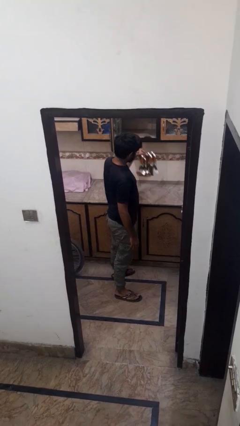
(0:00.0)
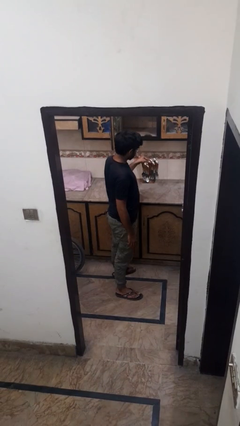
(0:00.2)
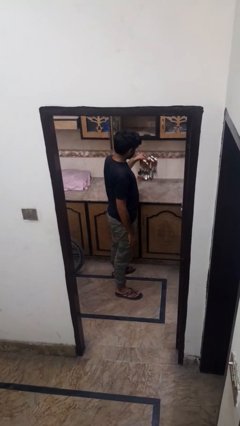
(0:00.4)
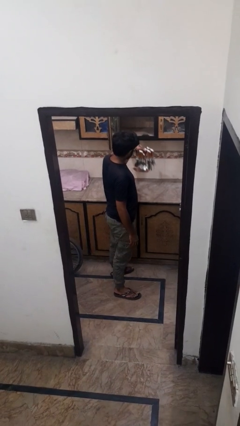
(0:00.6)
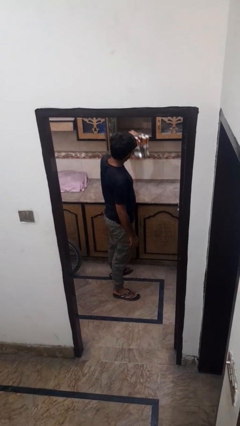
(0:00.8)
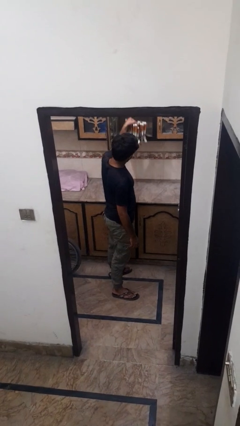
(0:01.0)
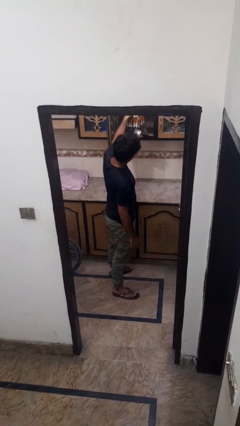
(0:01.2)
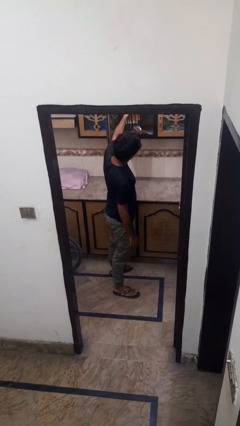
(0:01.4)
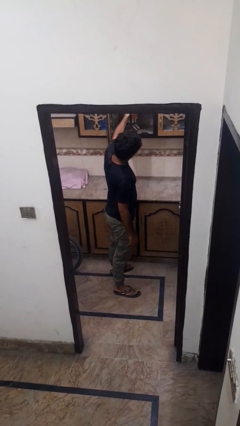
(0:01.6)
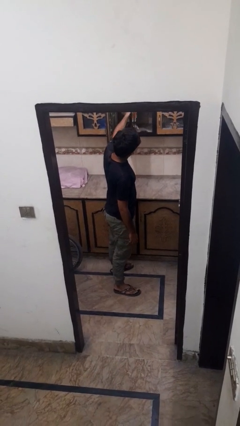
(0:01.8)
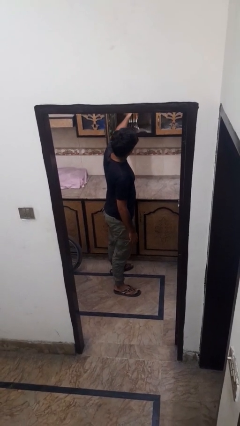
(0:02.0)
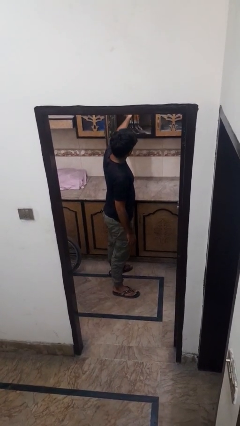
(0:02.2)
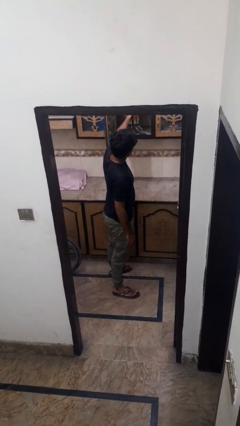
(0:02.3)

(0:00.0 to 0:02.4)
person puts down object into cabinet

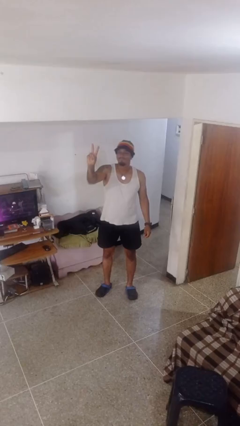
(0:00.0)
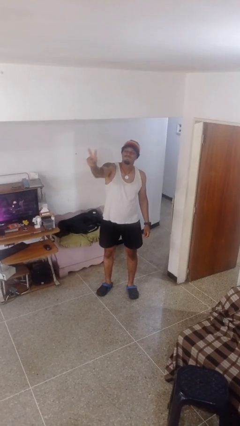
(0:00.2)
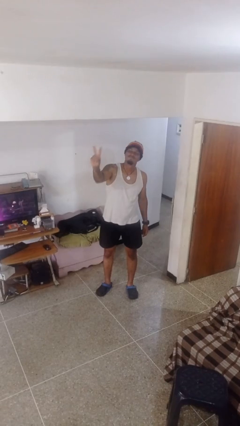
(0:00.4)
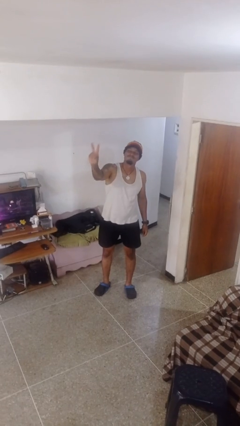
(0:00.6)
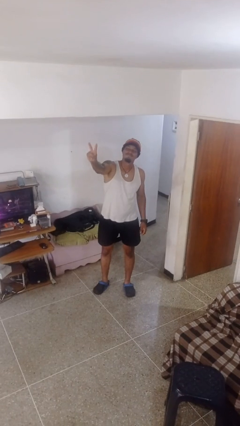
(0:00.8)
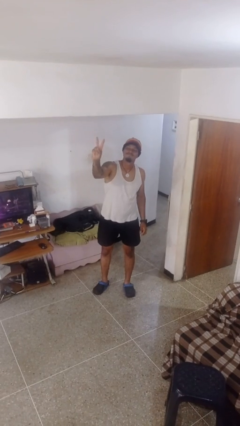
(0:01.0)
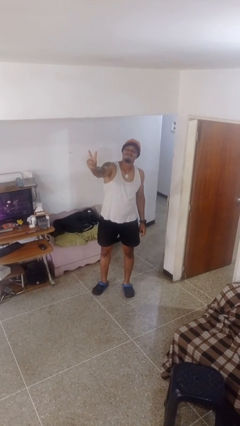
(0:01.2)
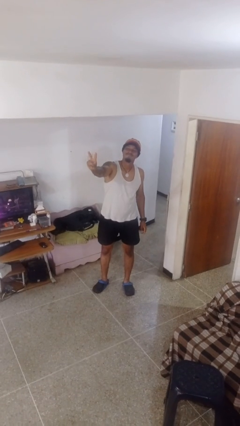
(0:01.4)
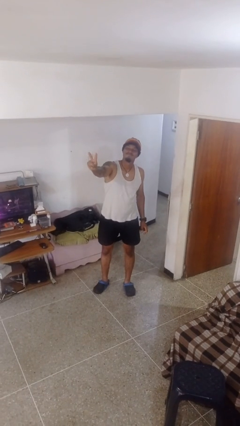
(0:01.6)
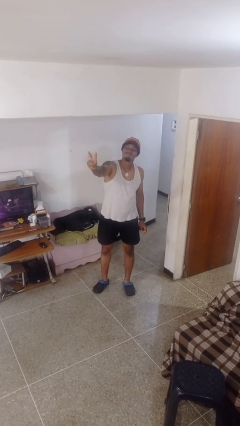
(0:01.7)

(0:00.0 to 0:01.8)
person gestures peace

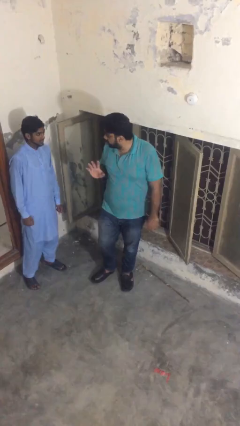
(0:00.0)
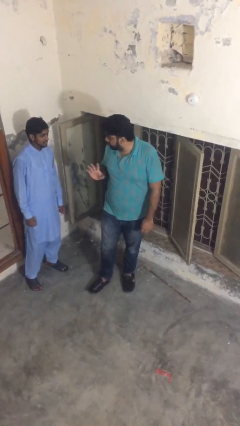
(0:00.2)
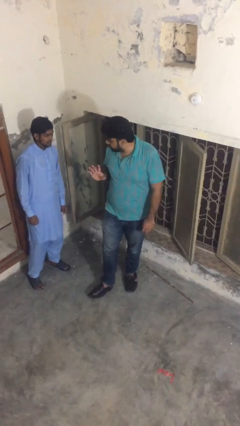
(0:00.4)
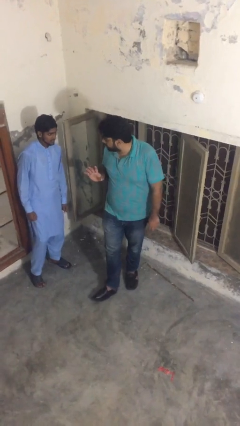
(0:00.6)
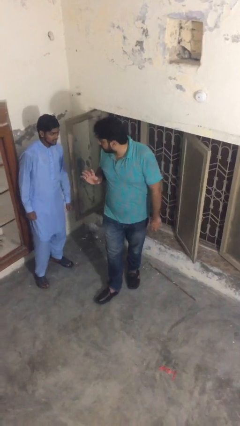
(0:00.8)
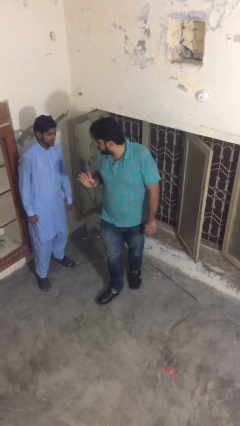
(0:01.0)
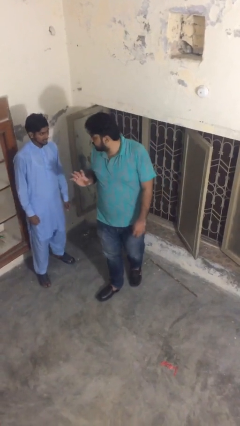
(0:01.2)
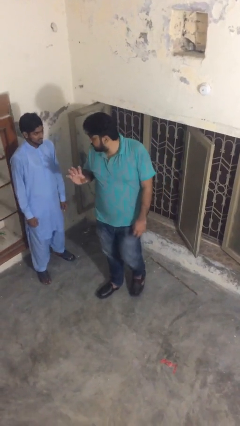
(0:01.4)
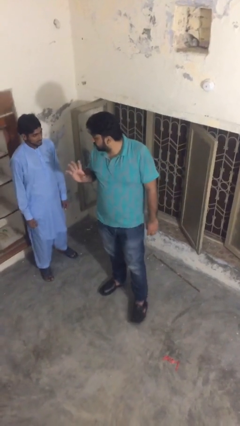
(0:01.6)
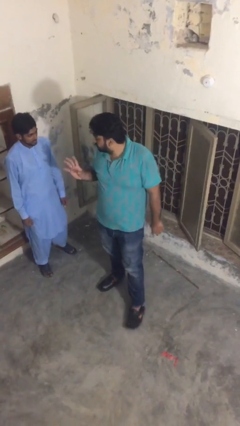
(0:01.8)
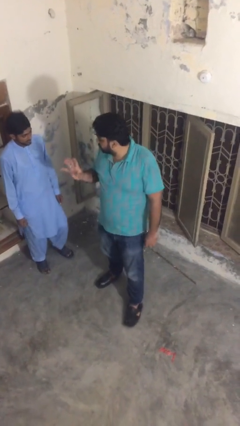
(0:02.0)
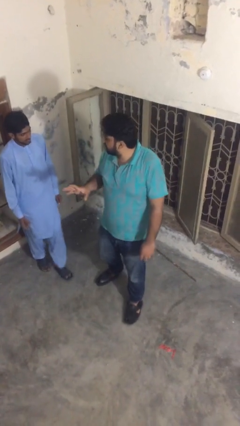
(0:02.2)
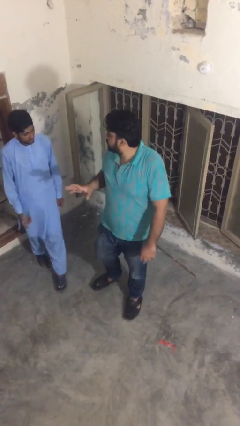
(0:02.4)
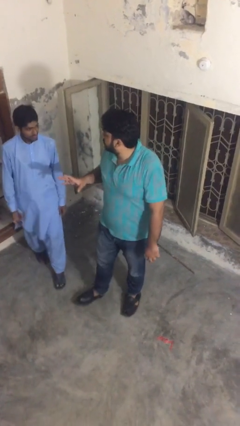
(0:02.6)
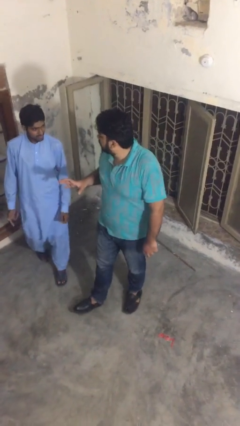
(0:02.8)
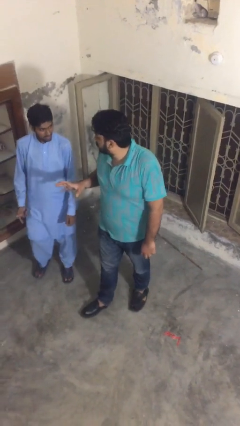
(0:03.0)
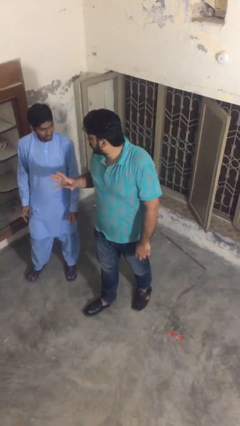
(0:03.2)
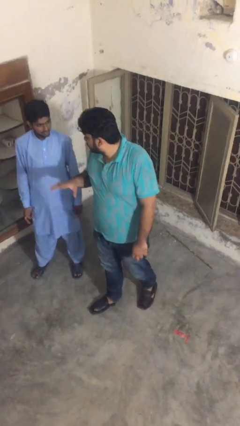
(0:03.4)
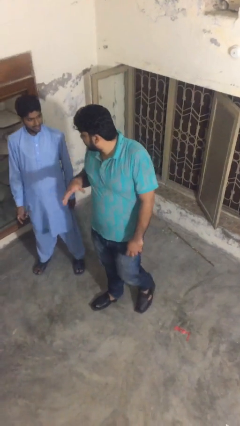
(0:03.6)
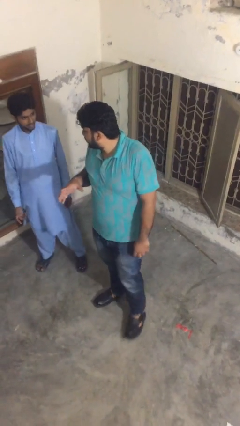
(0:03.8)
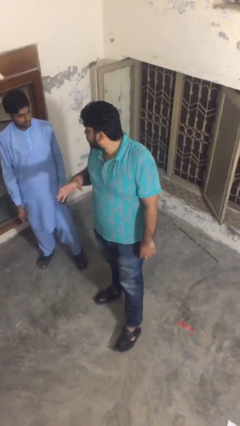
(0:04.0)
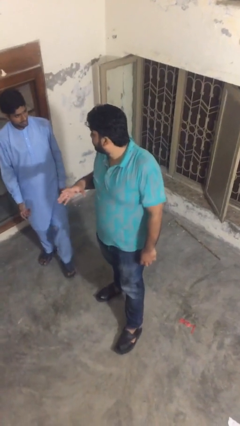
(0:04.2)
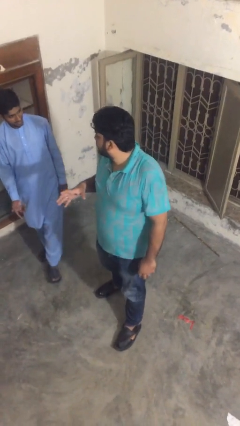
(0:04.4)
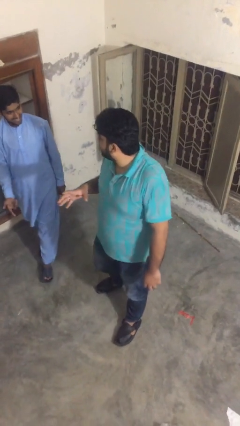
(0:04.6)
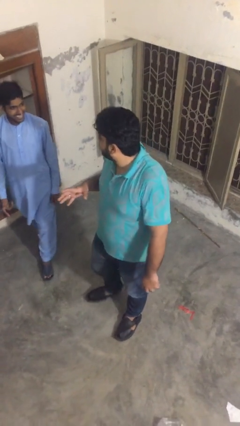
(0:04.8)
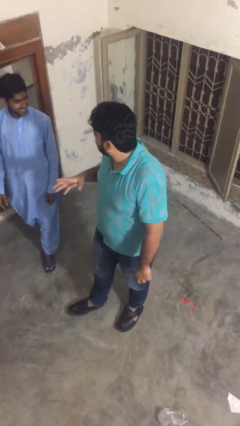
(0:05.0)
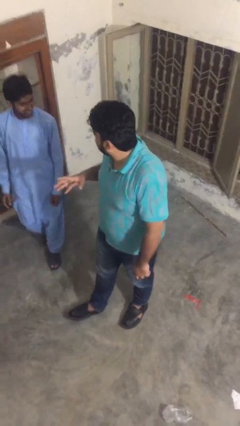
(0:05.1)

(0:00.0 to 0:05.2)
person talks to person

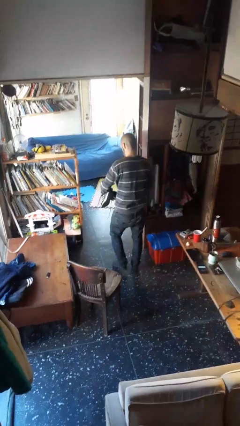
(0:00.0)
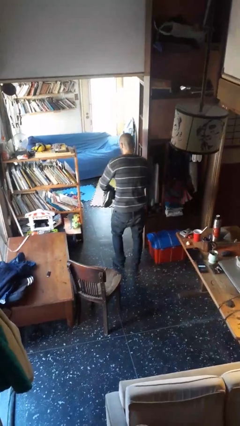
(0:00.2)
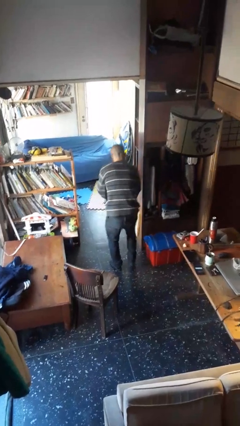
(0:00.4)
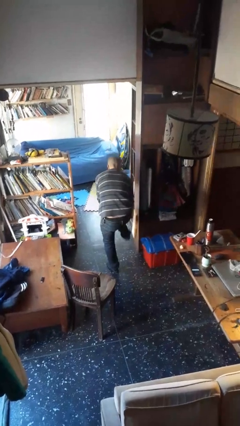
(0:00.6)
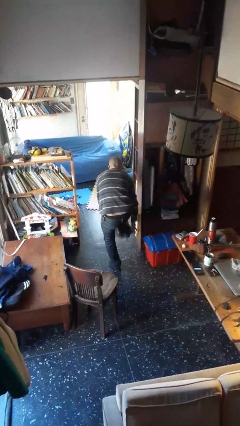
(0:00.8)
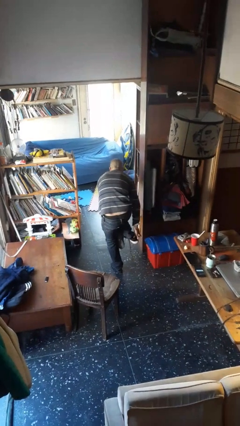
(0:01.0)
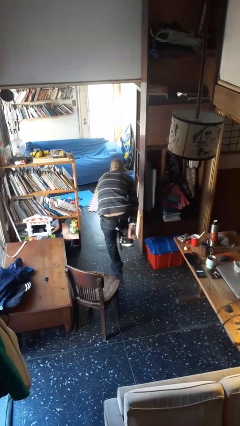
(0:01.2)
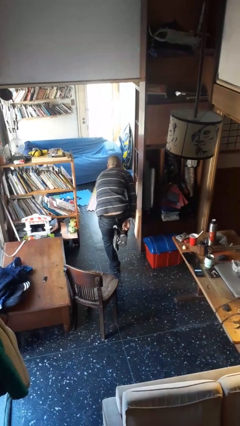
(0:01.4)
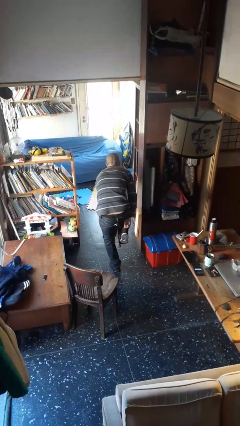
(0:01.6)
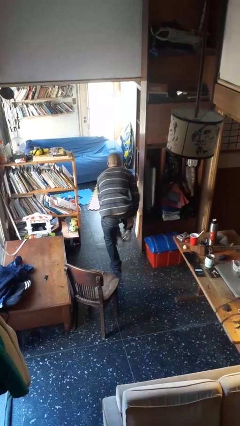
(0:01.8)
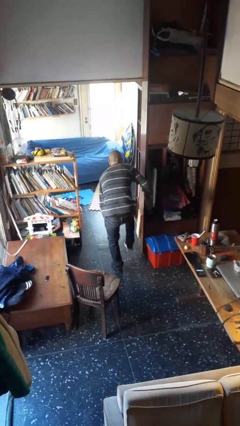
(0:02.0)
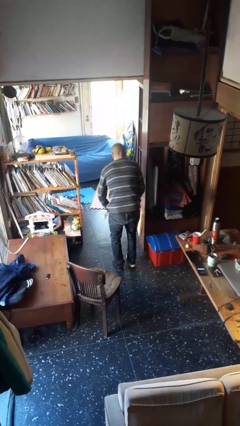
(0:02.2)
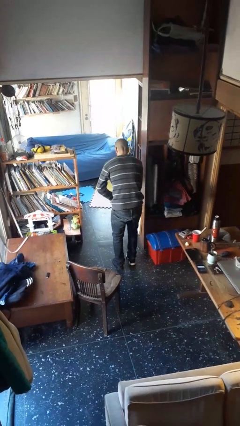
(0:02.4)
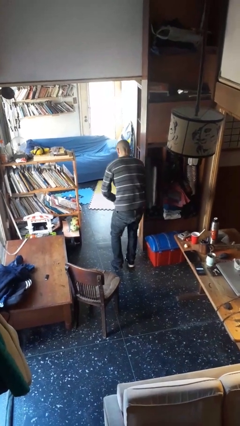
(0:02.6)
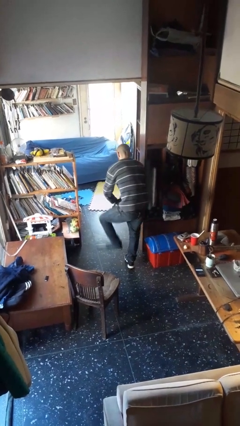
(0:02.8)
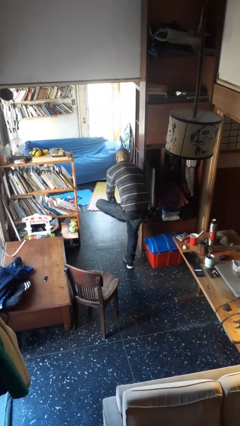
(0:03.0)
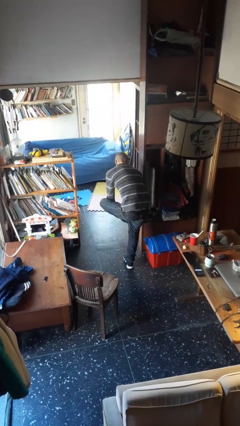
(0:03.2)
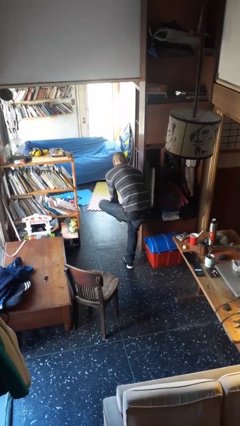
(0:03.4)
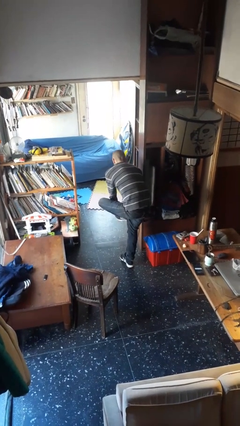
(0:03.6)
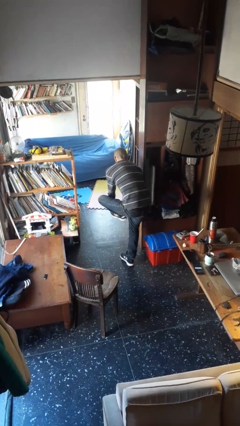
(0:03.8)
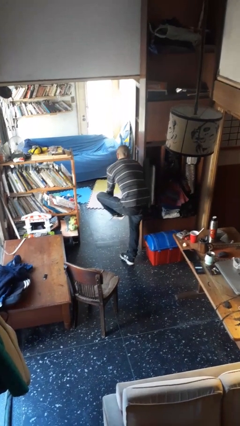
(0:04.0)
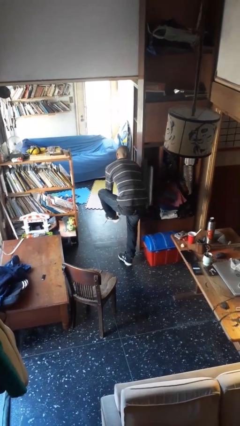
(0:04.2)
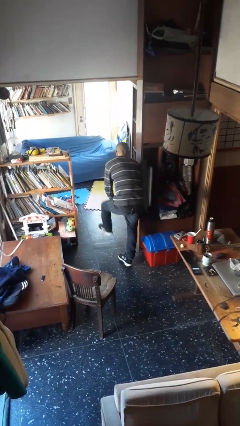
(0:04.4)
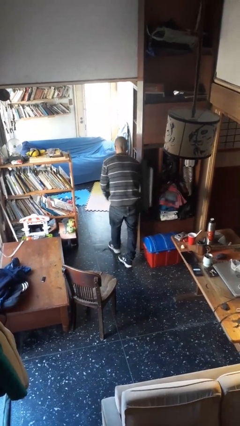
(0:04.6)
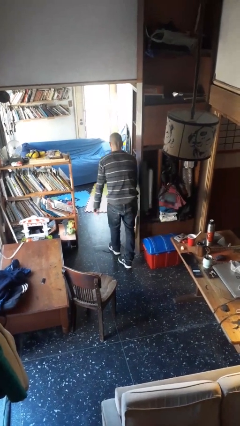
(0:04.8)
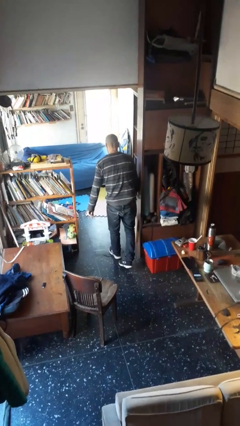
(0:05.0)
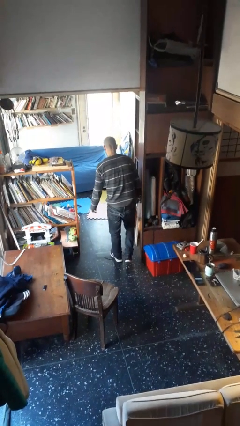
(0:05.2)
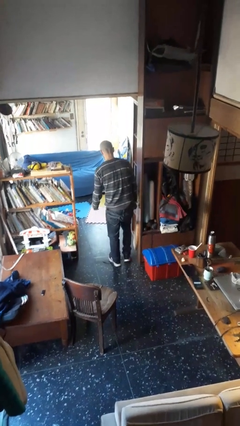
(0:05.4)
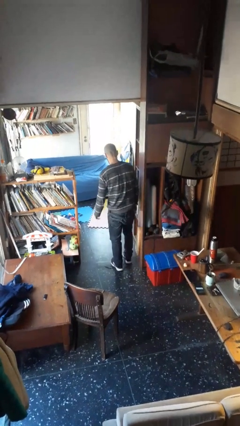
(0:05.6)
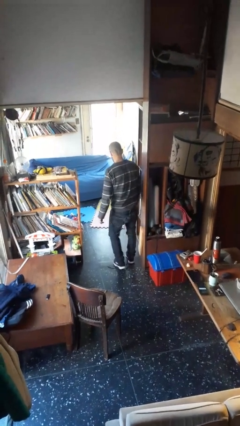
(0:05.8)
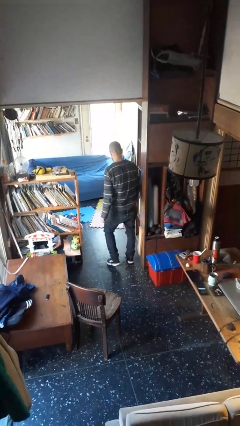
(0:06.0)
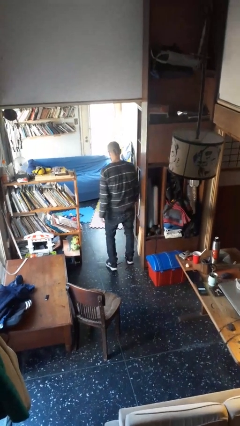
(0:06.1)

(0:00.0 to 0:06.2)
person puts on shoes

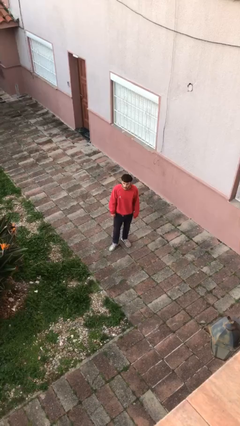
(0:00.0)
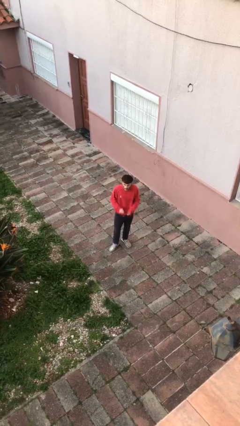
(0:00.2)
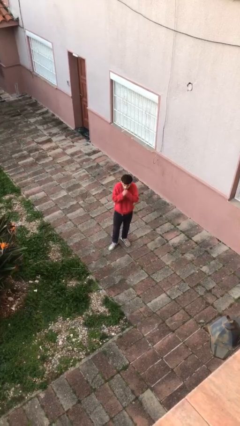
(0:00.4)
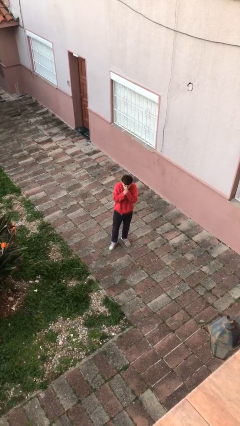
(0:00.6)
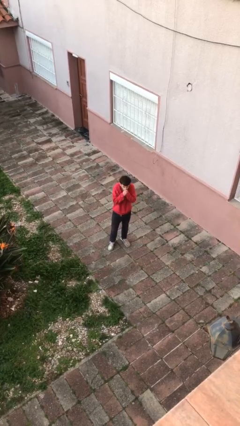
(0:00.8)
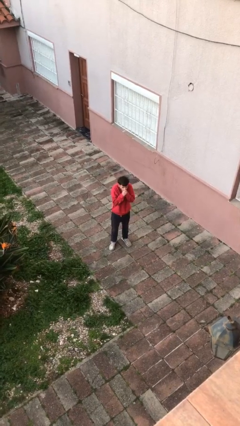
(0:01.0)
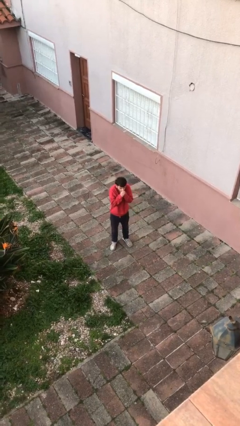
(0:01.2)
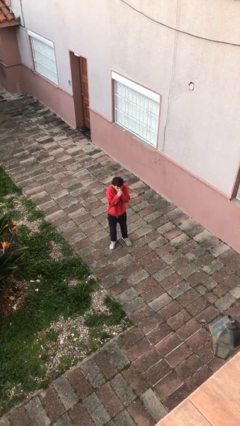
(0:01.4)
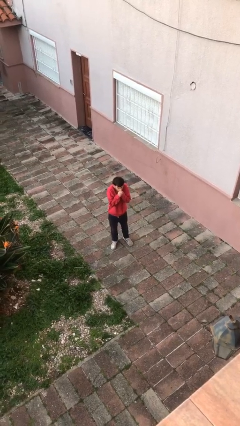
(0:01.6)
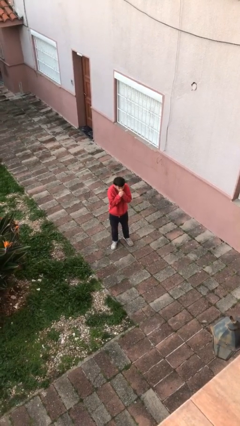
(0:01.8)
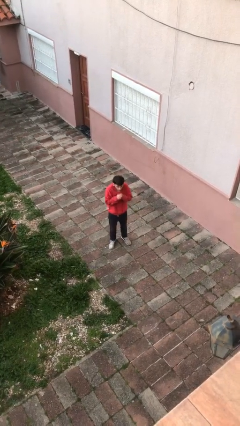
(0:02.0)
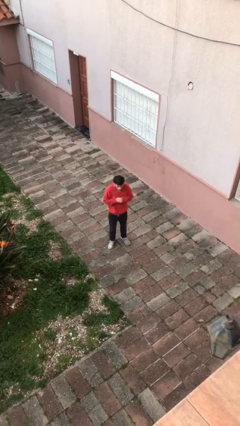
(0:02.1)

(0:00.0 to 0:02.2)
person blows into hands
